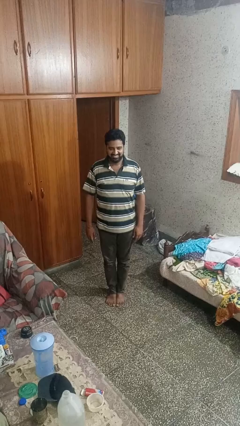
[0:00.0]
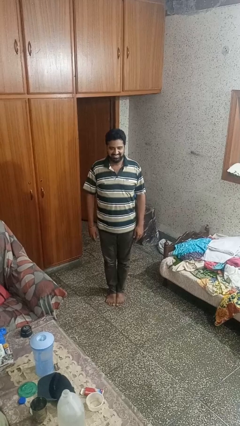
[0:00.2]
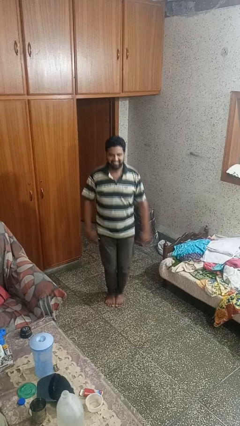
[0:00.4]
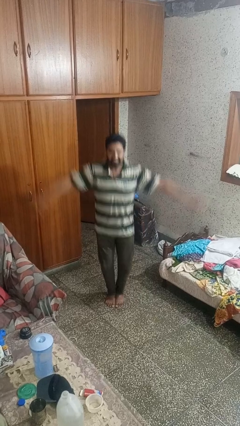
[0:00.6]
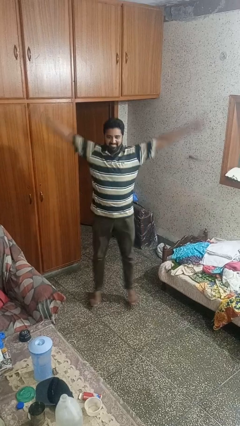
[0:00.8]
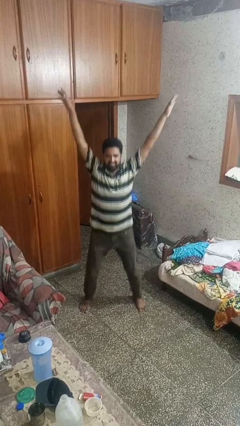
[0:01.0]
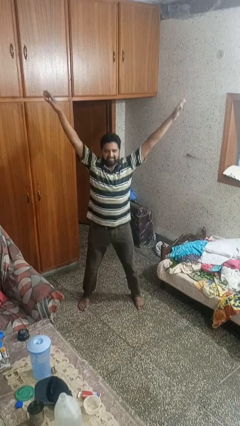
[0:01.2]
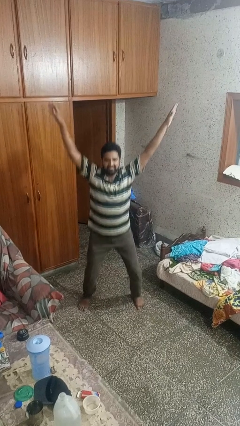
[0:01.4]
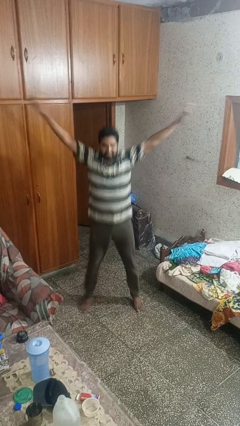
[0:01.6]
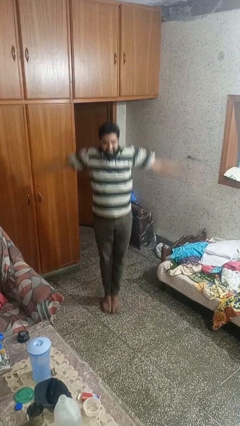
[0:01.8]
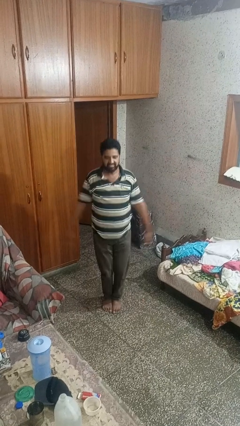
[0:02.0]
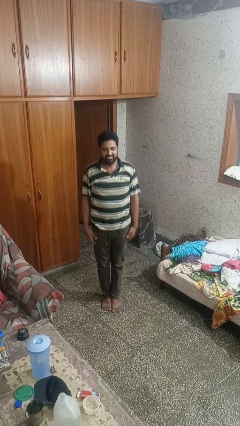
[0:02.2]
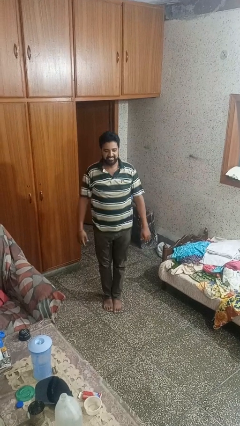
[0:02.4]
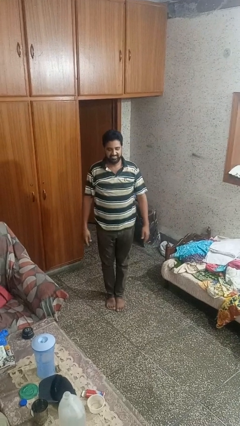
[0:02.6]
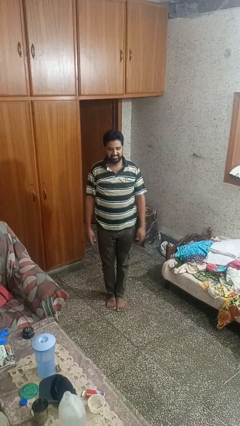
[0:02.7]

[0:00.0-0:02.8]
person exercises with jumping jacks

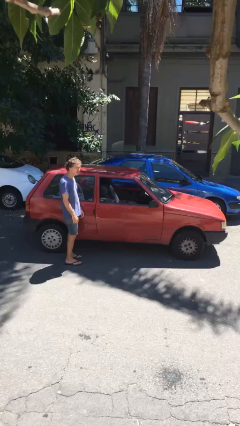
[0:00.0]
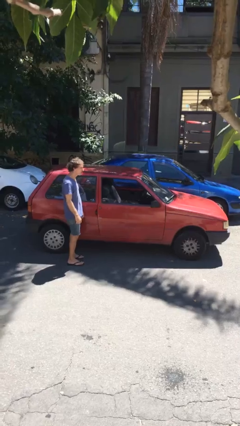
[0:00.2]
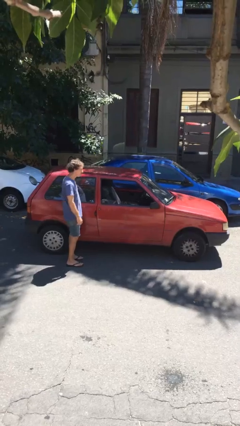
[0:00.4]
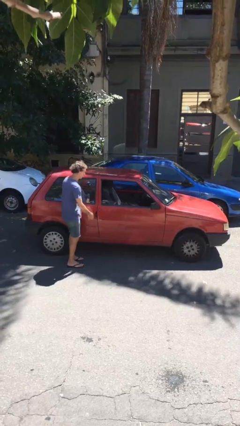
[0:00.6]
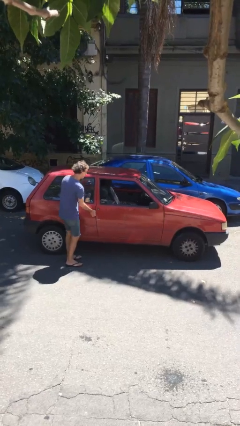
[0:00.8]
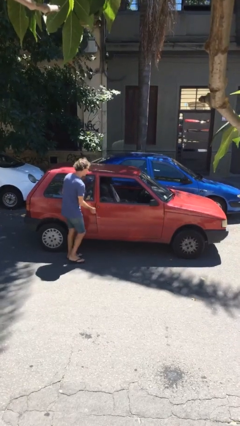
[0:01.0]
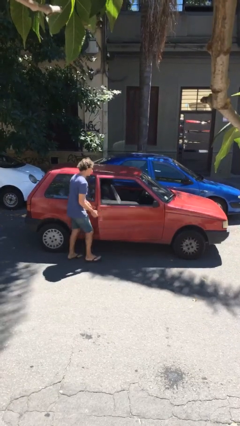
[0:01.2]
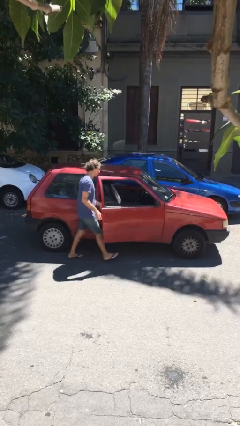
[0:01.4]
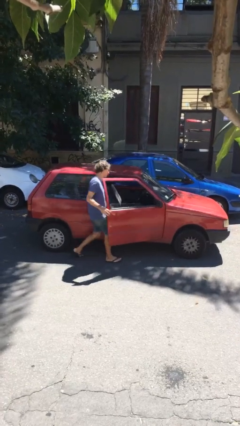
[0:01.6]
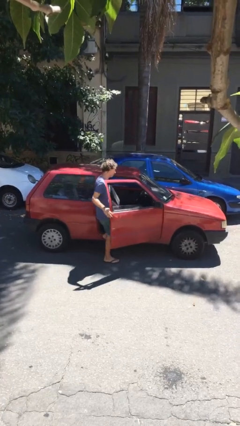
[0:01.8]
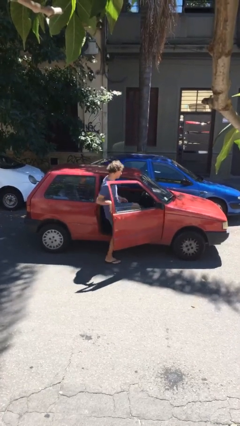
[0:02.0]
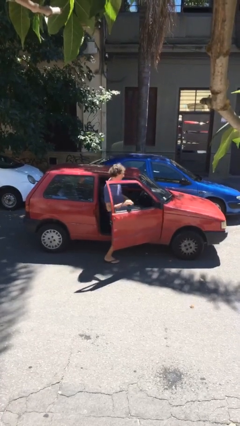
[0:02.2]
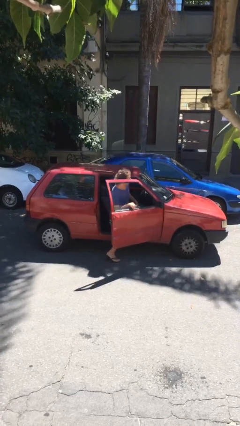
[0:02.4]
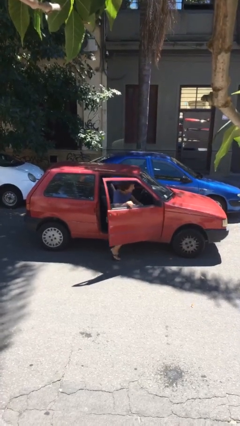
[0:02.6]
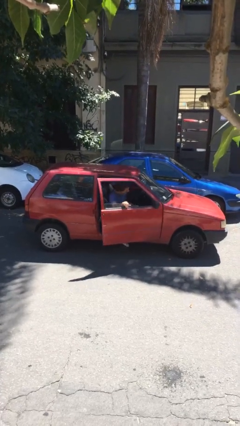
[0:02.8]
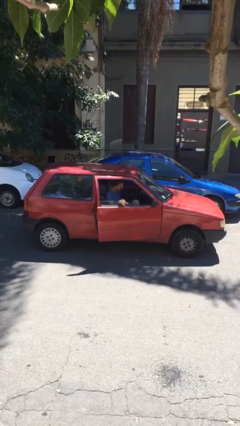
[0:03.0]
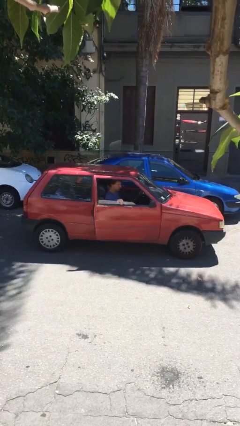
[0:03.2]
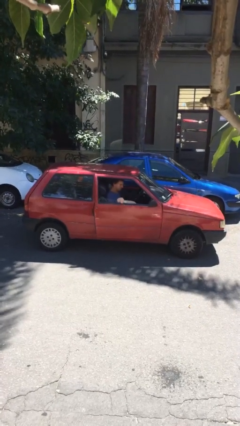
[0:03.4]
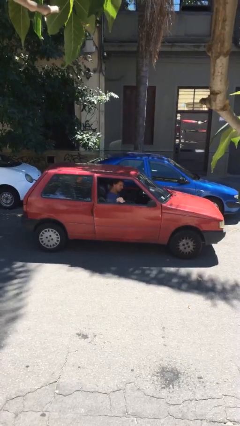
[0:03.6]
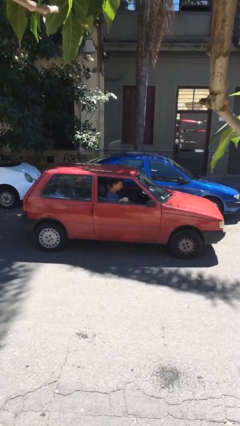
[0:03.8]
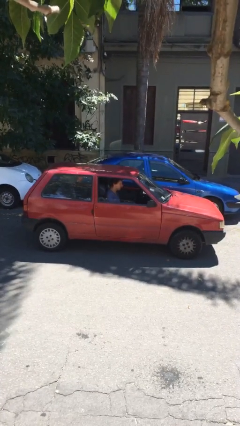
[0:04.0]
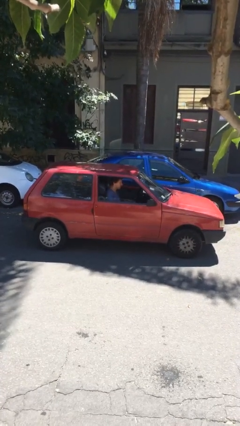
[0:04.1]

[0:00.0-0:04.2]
car picks up person

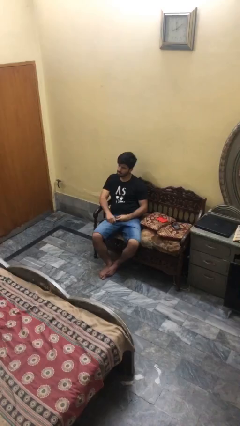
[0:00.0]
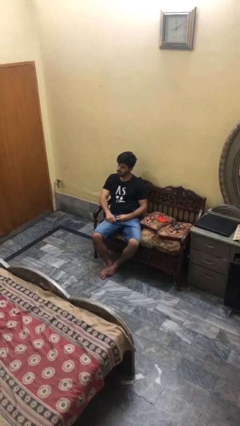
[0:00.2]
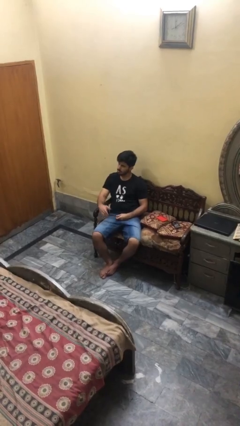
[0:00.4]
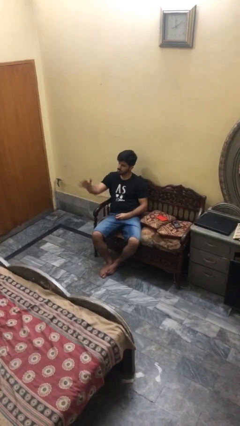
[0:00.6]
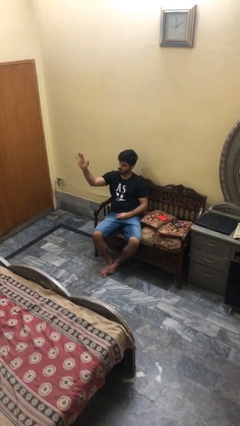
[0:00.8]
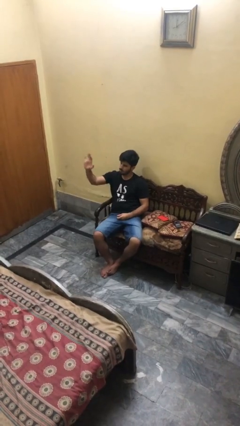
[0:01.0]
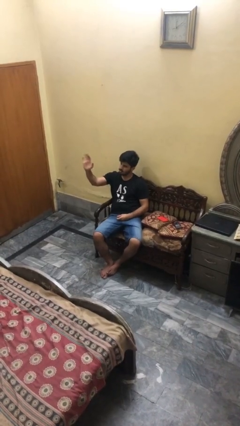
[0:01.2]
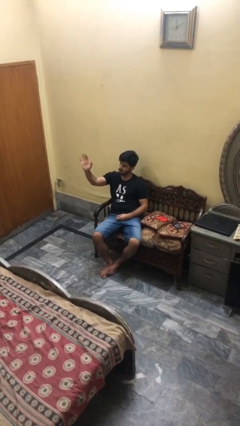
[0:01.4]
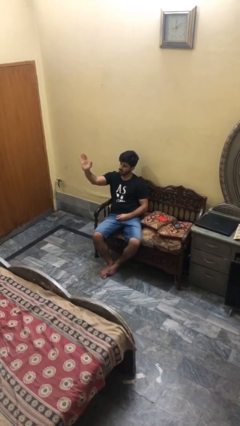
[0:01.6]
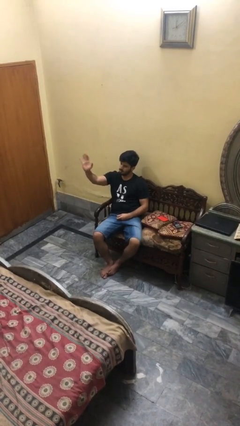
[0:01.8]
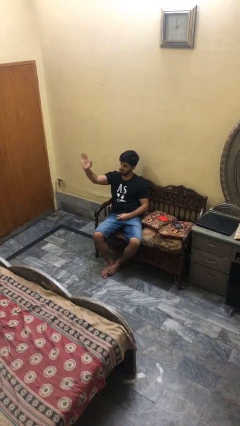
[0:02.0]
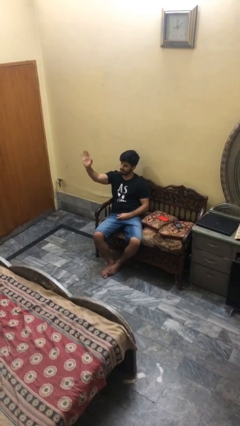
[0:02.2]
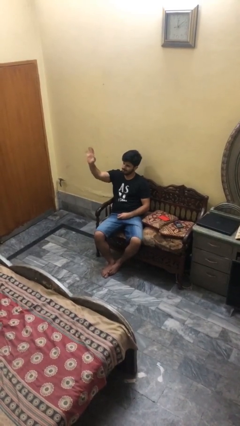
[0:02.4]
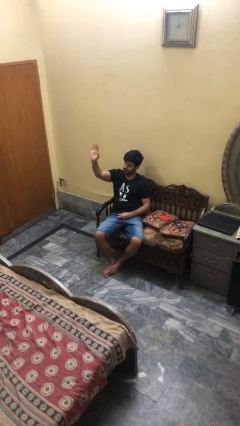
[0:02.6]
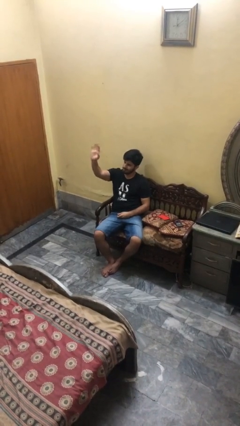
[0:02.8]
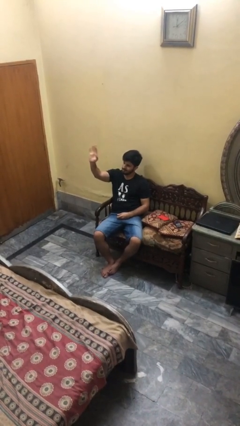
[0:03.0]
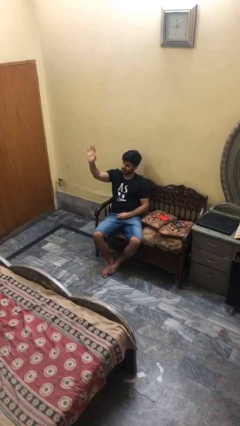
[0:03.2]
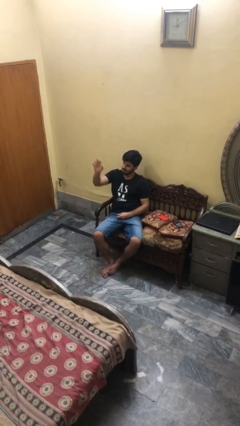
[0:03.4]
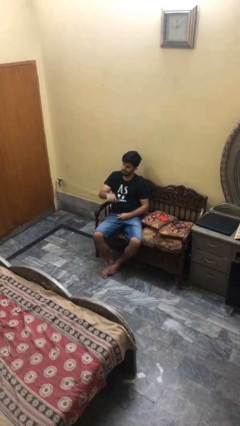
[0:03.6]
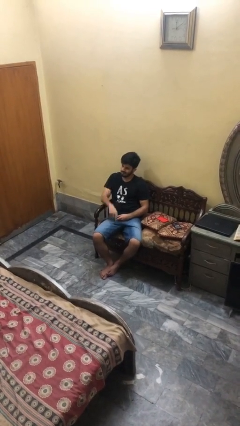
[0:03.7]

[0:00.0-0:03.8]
person waves at person

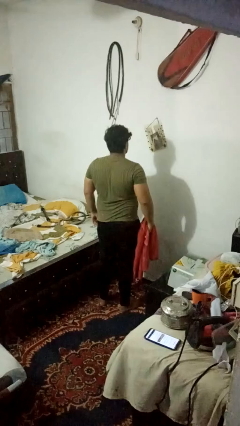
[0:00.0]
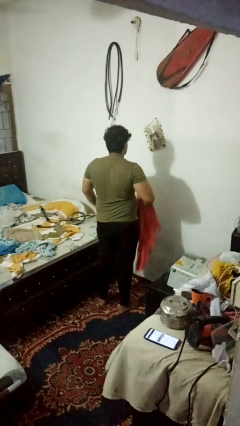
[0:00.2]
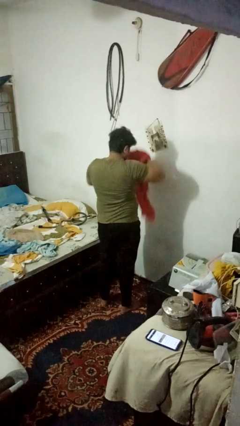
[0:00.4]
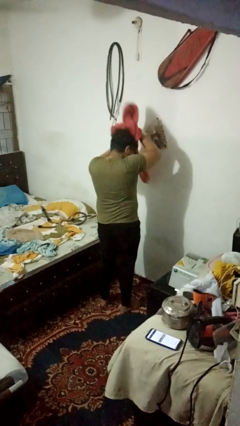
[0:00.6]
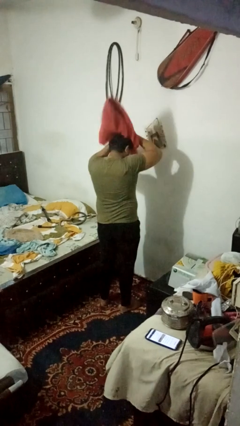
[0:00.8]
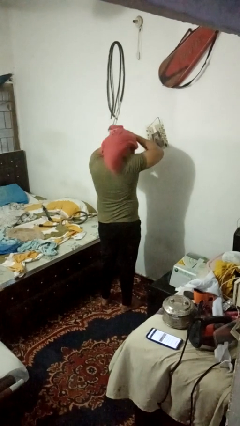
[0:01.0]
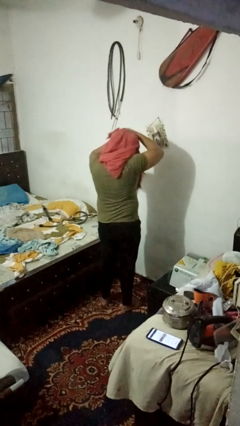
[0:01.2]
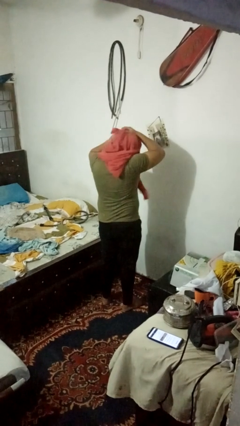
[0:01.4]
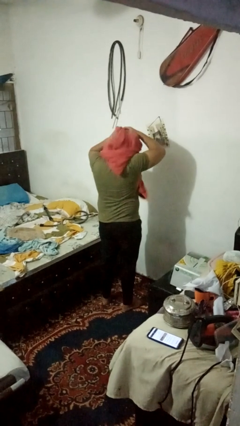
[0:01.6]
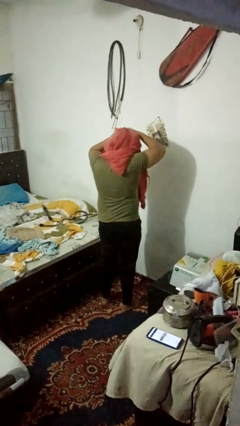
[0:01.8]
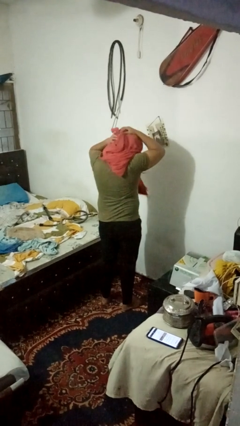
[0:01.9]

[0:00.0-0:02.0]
person dries hair with towel

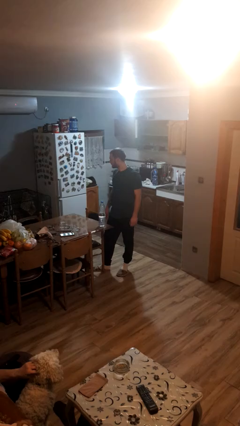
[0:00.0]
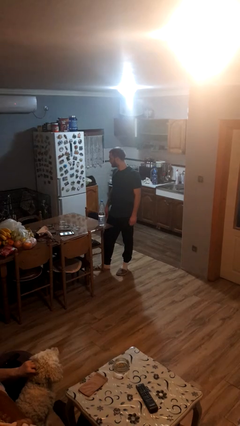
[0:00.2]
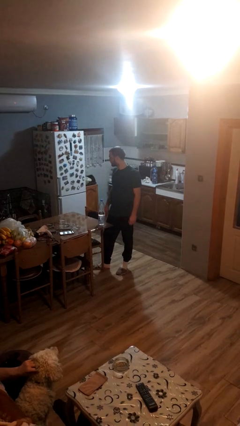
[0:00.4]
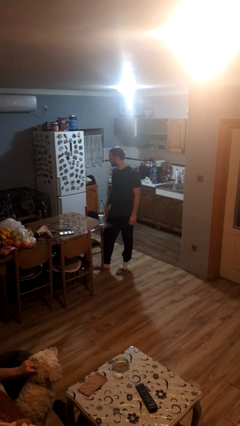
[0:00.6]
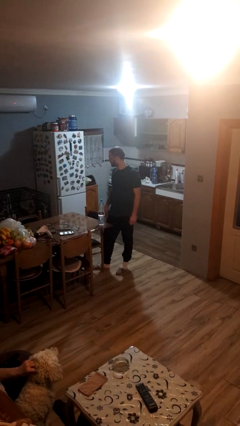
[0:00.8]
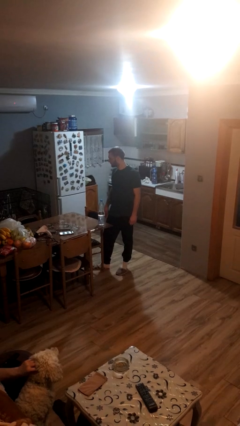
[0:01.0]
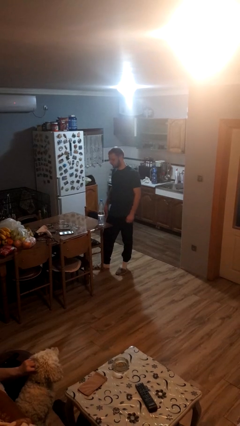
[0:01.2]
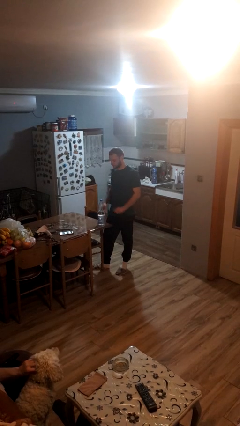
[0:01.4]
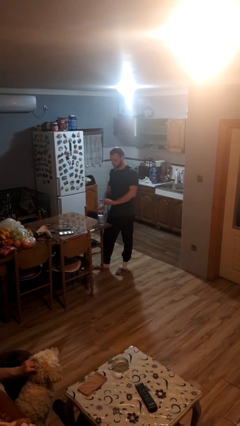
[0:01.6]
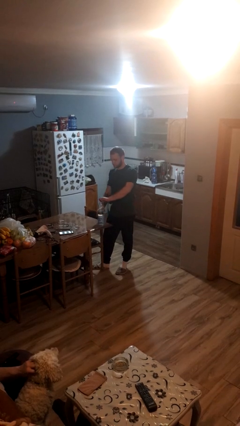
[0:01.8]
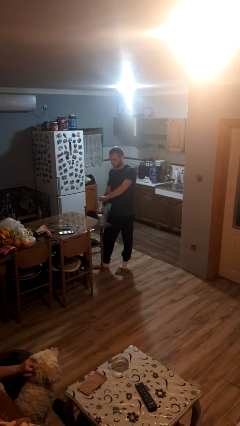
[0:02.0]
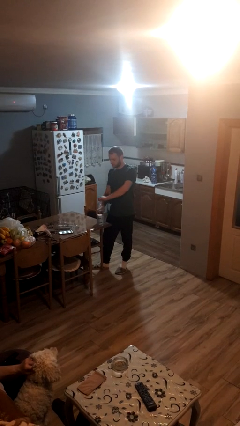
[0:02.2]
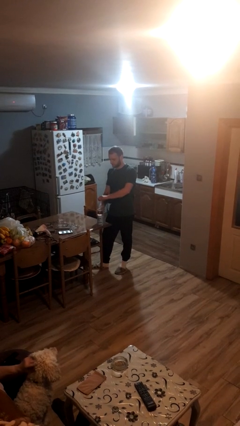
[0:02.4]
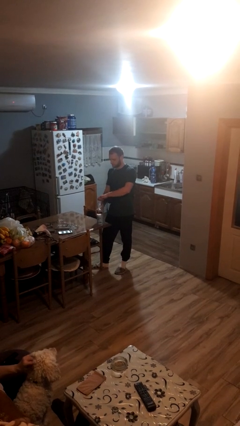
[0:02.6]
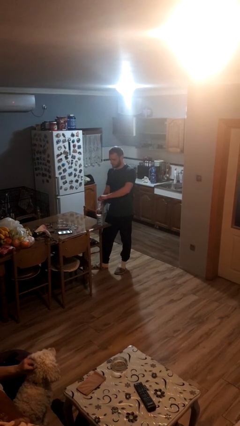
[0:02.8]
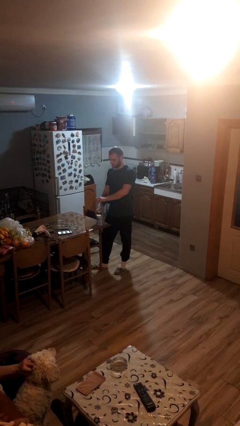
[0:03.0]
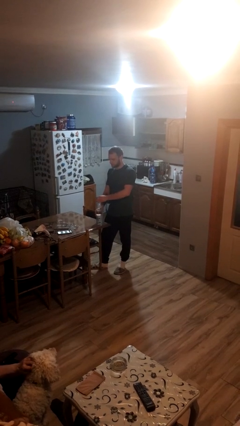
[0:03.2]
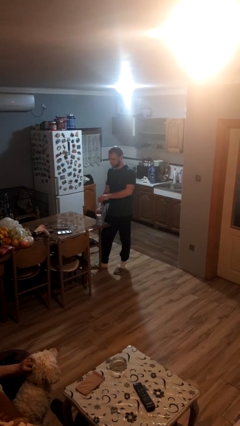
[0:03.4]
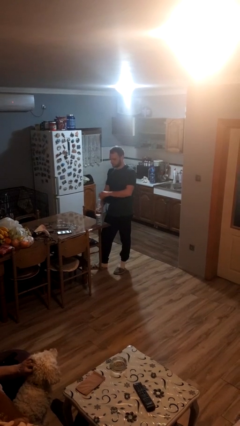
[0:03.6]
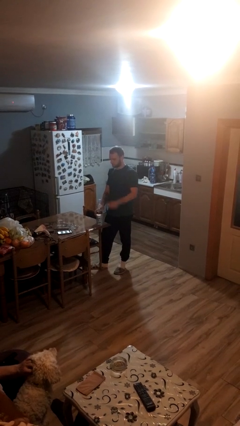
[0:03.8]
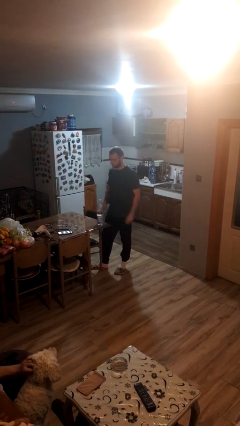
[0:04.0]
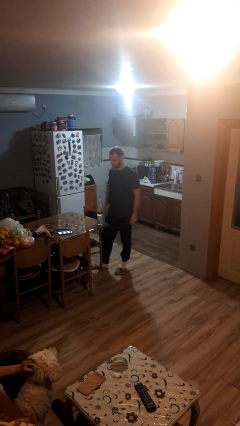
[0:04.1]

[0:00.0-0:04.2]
person unscrews lid from bottle

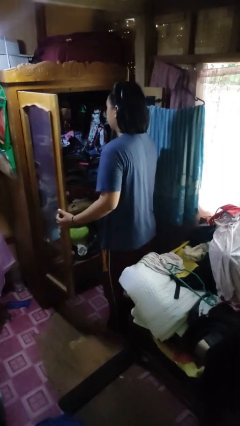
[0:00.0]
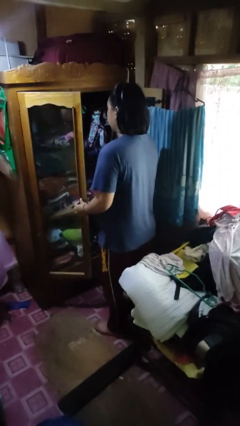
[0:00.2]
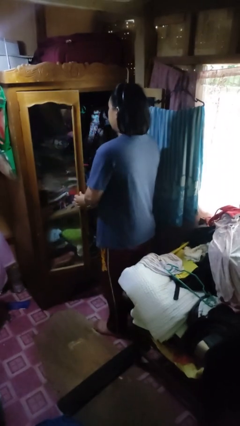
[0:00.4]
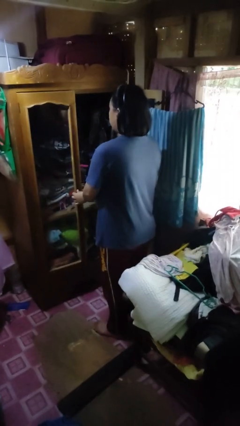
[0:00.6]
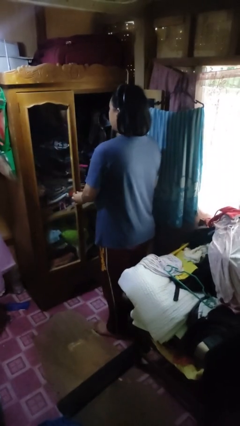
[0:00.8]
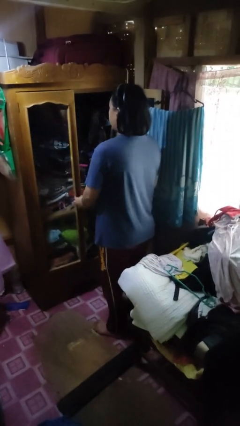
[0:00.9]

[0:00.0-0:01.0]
person closes closet door
